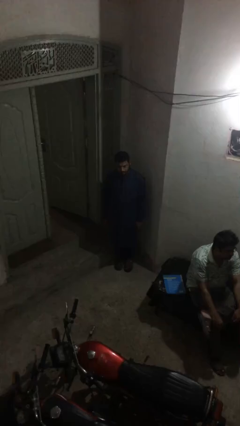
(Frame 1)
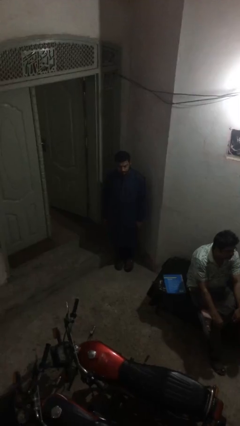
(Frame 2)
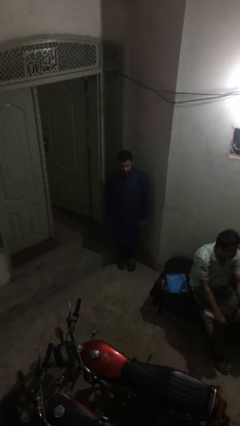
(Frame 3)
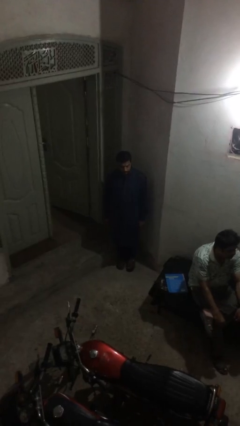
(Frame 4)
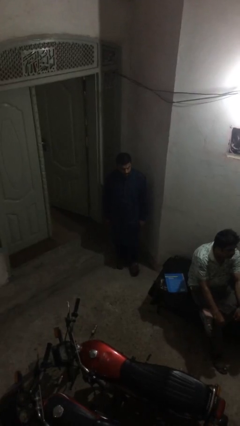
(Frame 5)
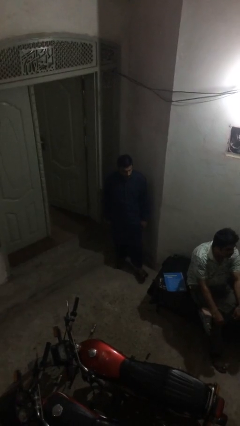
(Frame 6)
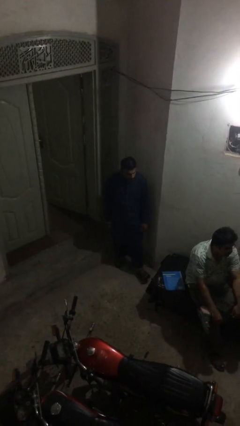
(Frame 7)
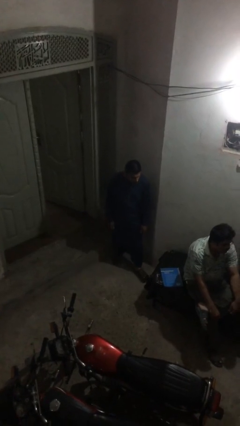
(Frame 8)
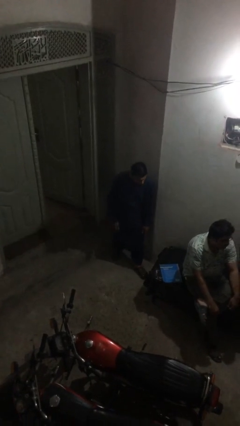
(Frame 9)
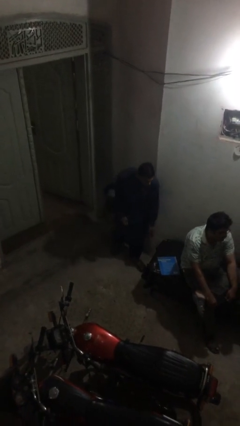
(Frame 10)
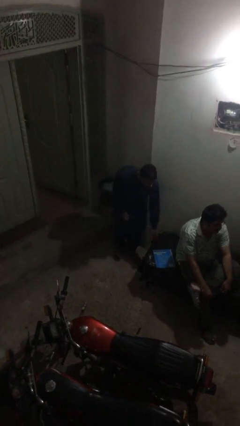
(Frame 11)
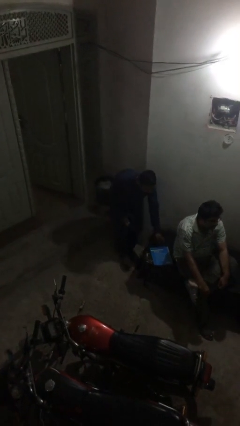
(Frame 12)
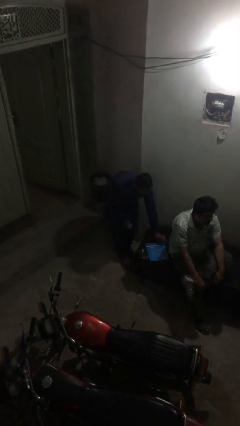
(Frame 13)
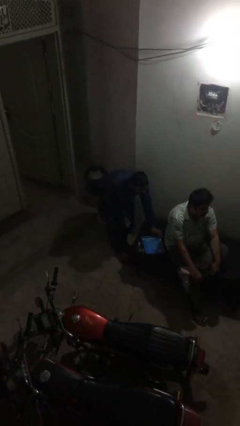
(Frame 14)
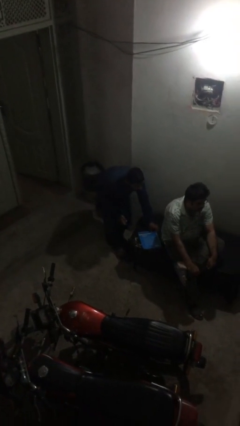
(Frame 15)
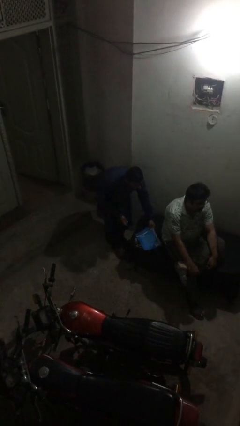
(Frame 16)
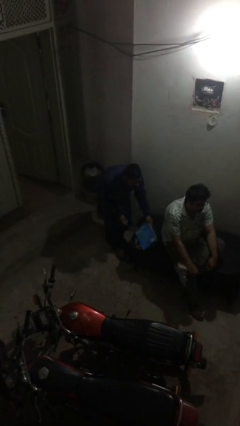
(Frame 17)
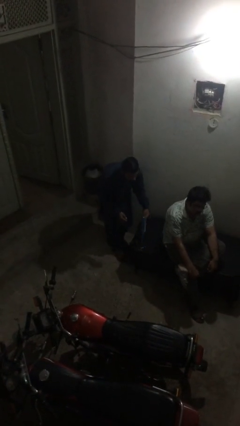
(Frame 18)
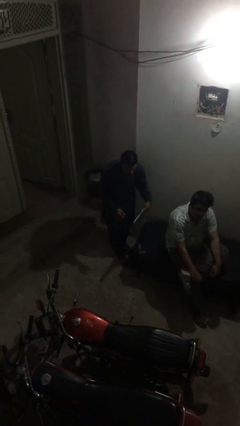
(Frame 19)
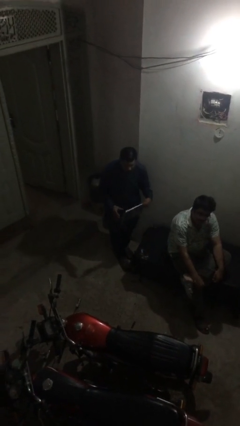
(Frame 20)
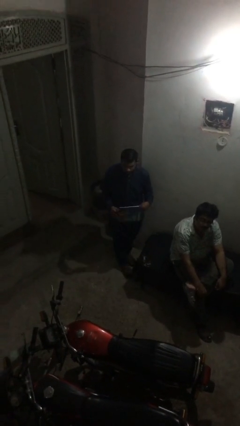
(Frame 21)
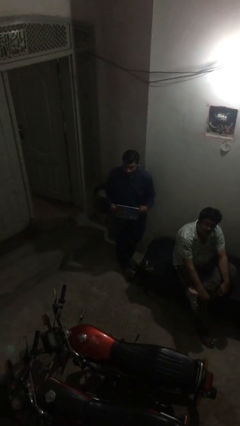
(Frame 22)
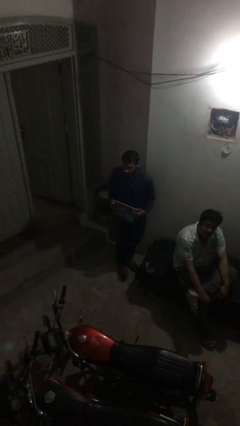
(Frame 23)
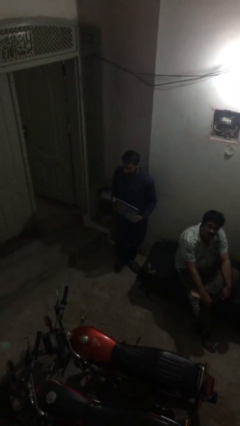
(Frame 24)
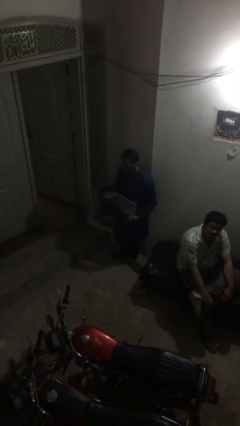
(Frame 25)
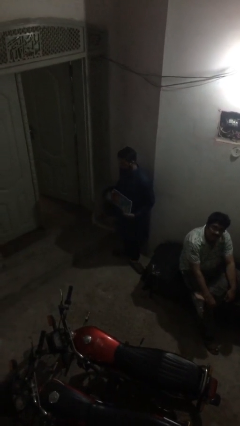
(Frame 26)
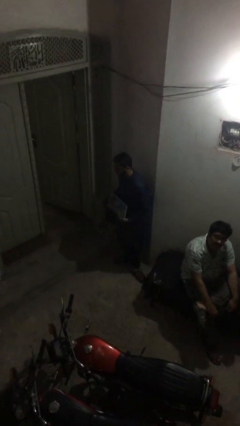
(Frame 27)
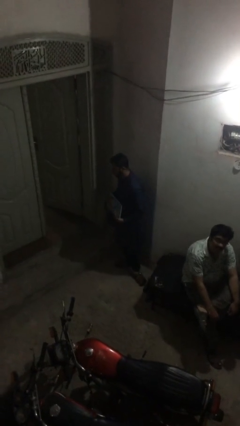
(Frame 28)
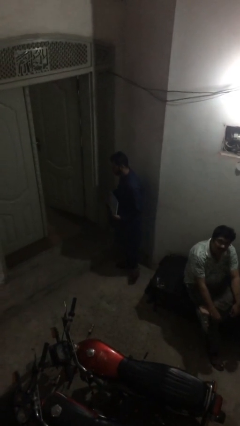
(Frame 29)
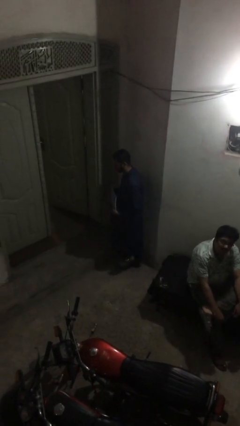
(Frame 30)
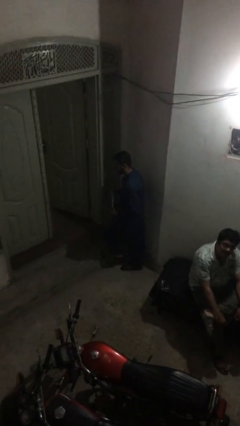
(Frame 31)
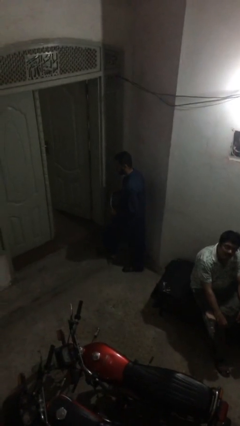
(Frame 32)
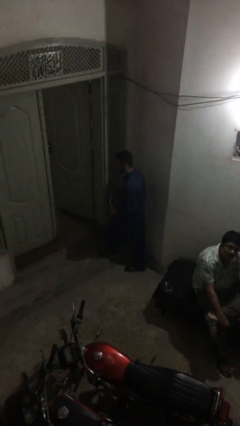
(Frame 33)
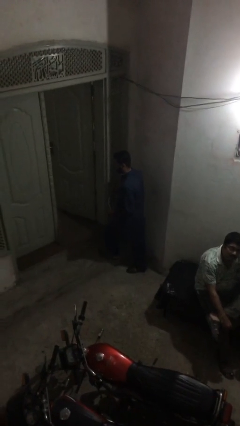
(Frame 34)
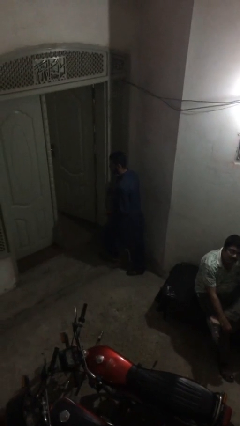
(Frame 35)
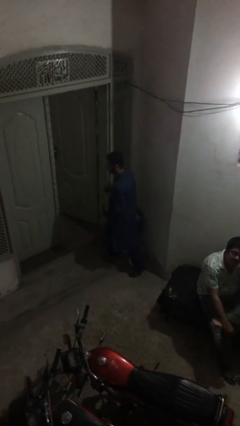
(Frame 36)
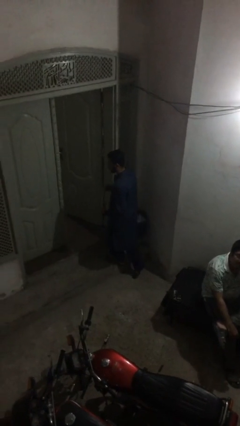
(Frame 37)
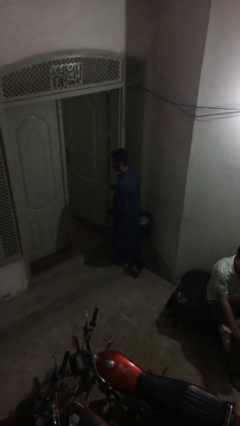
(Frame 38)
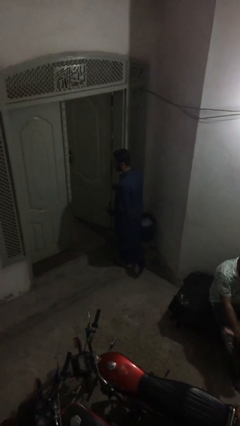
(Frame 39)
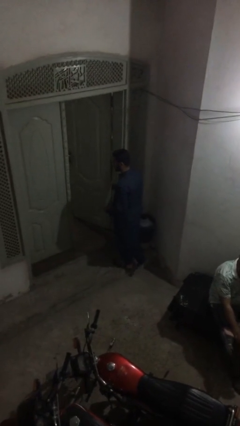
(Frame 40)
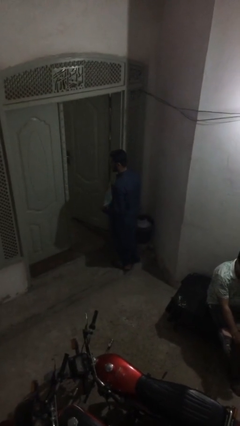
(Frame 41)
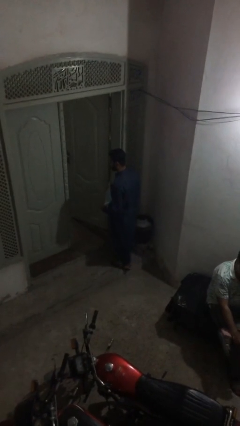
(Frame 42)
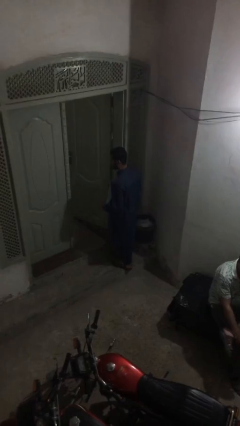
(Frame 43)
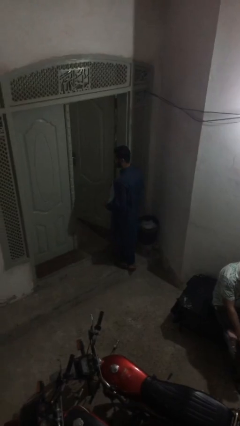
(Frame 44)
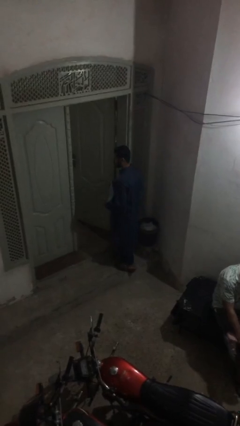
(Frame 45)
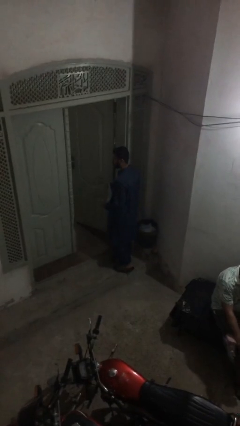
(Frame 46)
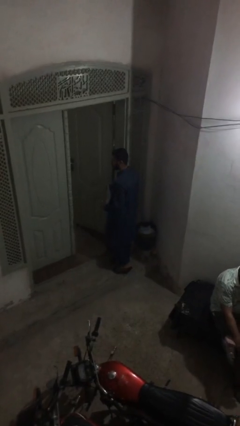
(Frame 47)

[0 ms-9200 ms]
person steals object from person

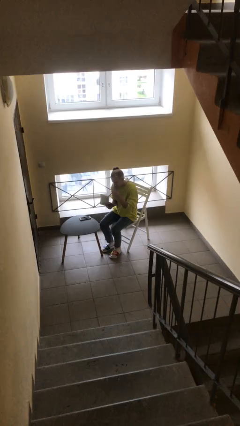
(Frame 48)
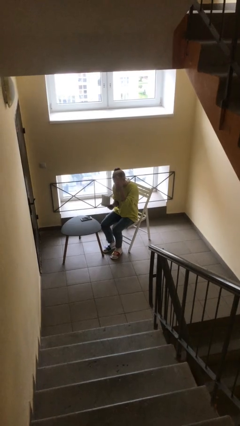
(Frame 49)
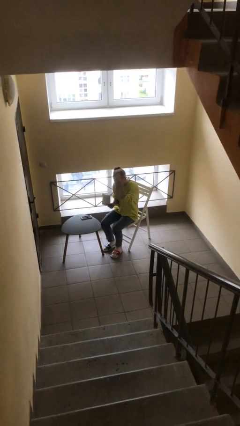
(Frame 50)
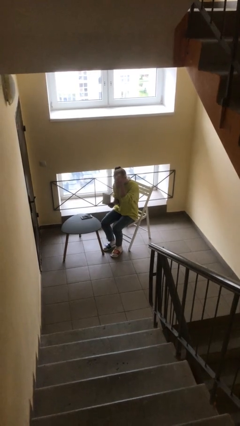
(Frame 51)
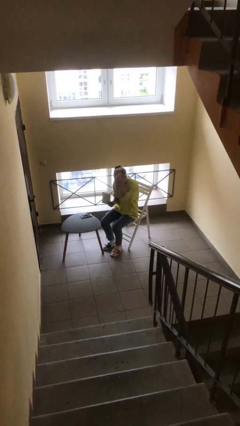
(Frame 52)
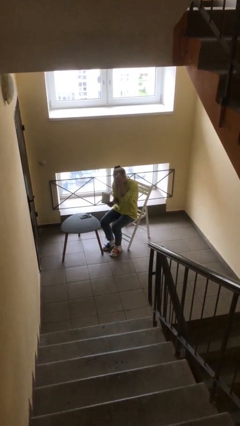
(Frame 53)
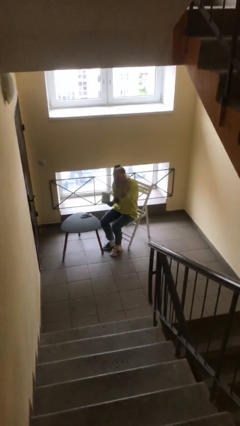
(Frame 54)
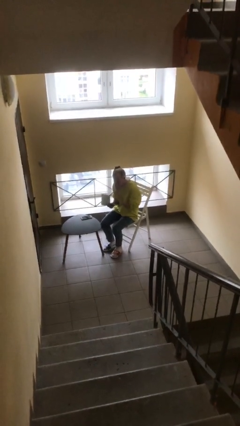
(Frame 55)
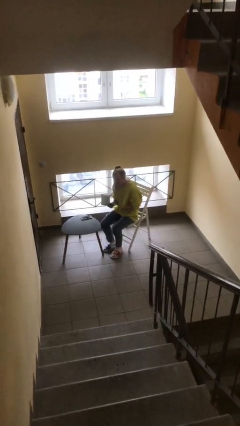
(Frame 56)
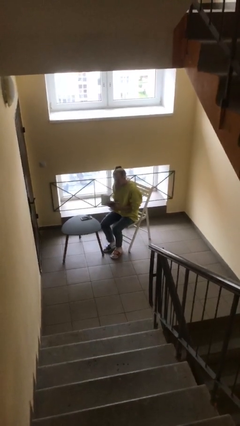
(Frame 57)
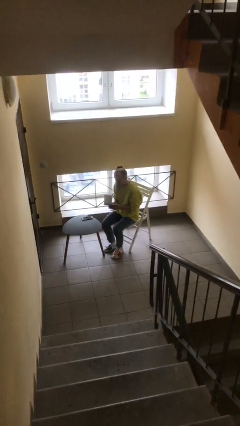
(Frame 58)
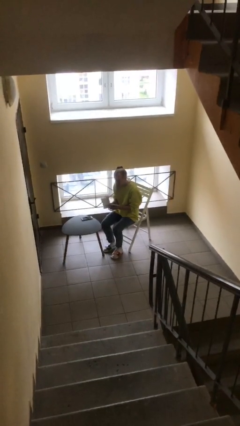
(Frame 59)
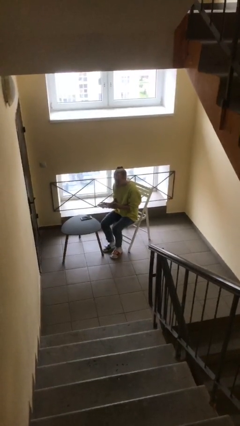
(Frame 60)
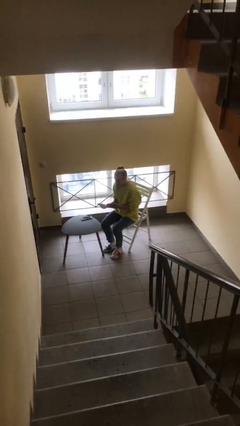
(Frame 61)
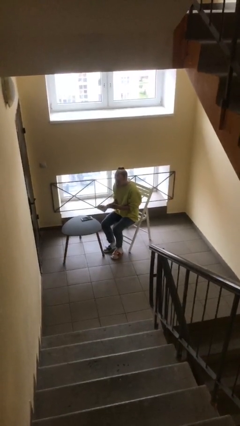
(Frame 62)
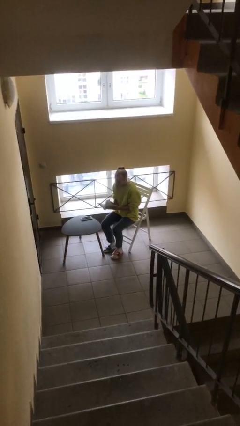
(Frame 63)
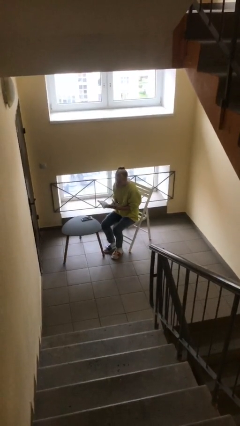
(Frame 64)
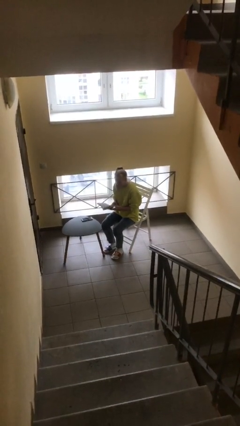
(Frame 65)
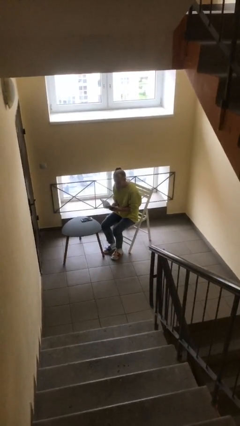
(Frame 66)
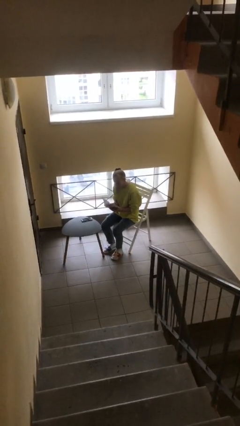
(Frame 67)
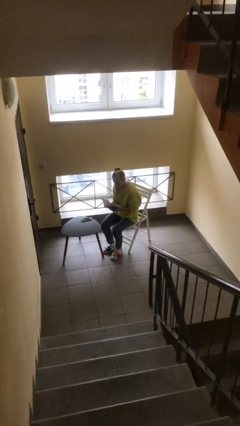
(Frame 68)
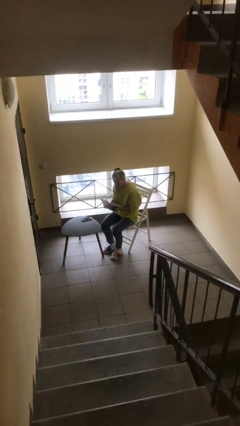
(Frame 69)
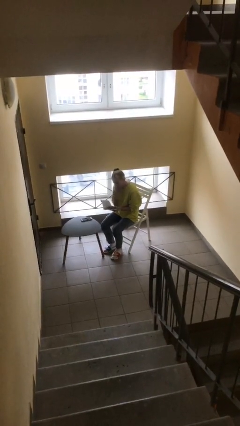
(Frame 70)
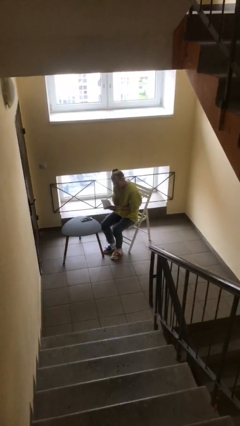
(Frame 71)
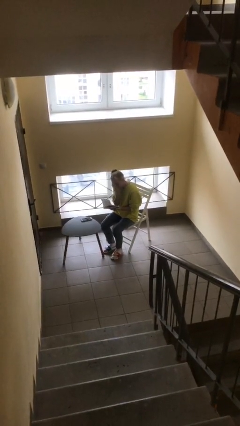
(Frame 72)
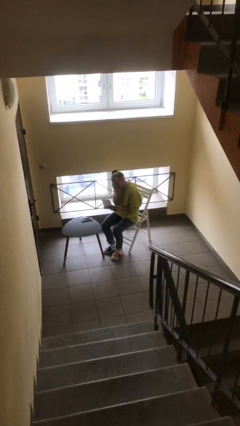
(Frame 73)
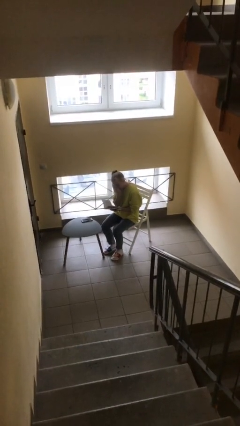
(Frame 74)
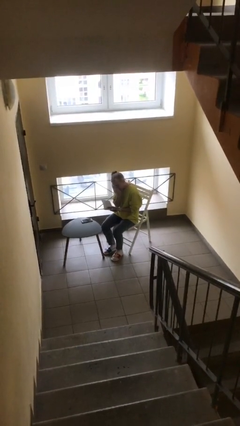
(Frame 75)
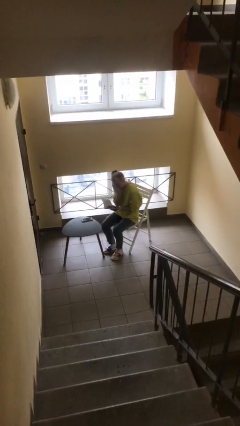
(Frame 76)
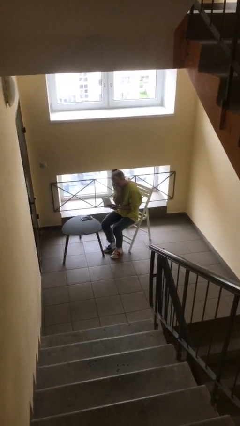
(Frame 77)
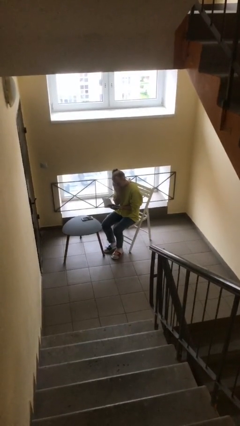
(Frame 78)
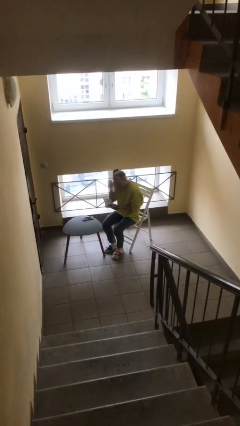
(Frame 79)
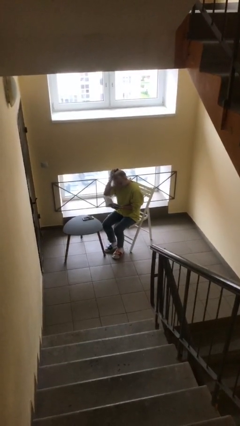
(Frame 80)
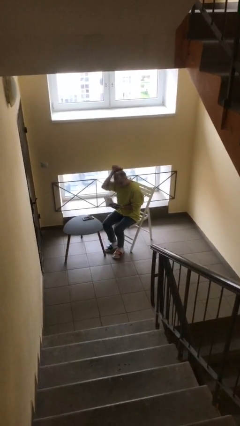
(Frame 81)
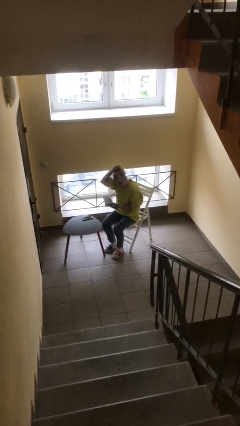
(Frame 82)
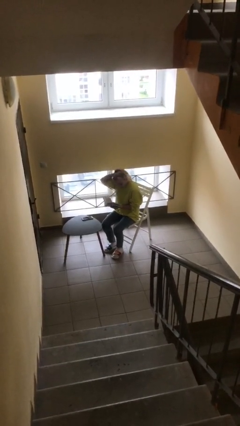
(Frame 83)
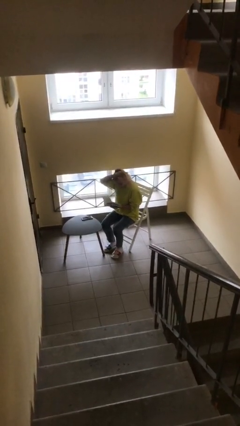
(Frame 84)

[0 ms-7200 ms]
person reads document

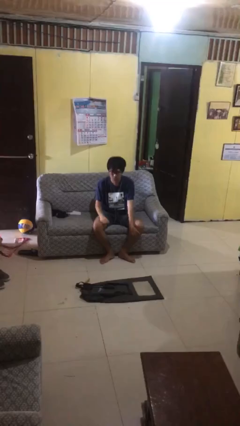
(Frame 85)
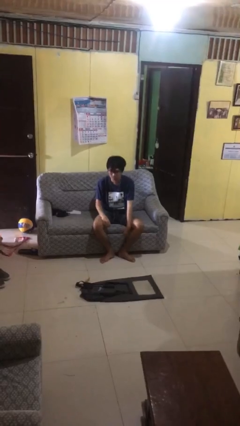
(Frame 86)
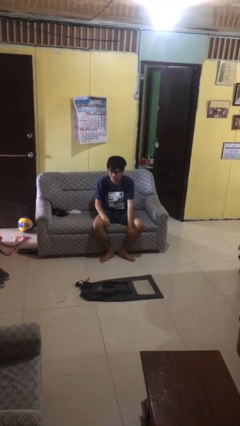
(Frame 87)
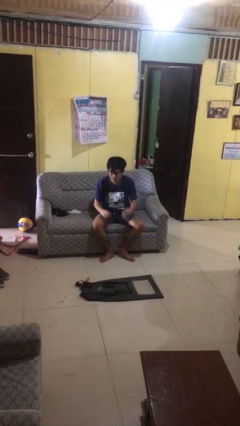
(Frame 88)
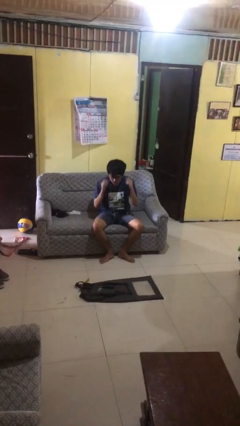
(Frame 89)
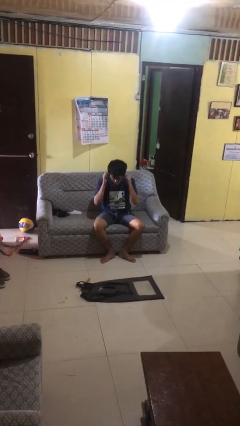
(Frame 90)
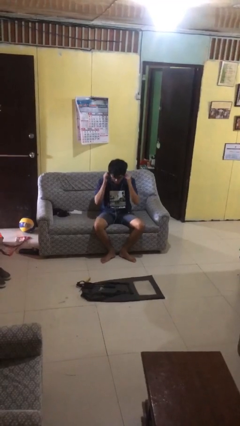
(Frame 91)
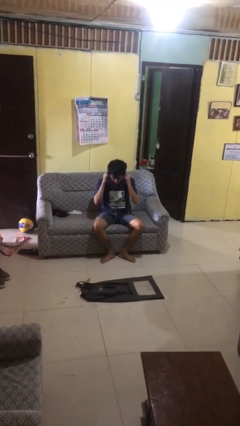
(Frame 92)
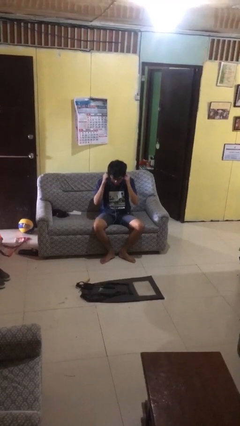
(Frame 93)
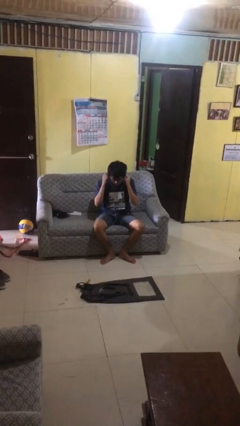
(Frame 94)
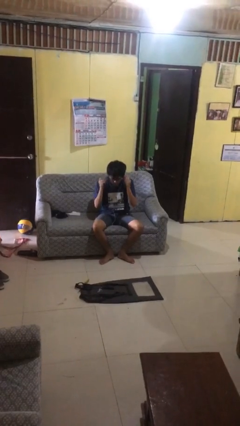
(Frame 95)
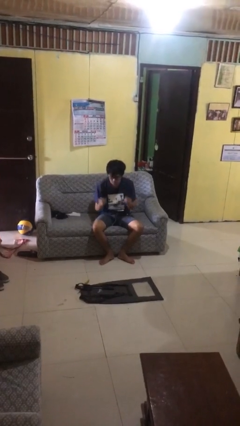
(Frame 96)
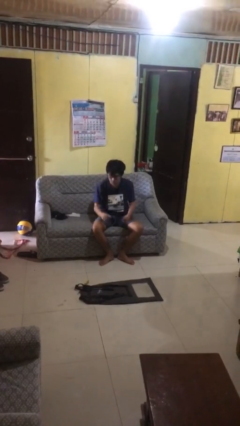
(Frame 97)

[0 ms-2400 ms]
person takes off headphones
